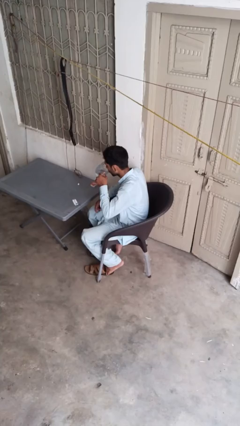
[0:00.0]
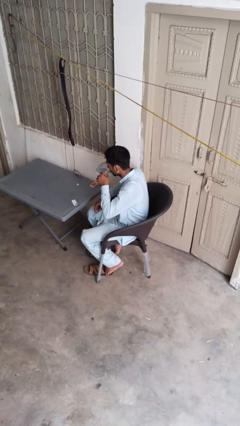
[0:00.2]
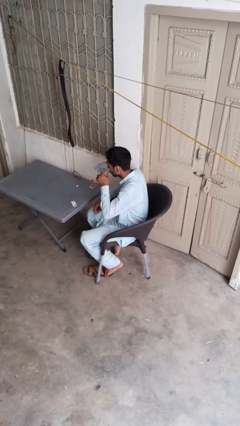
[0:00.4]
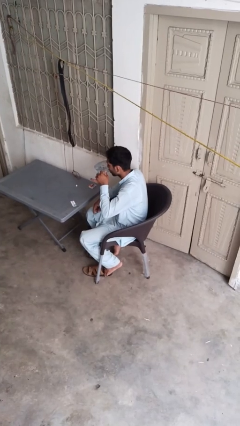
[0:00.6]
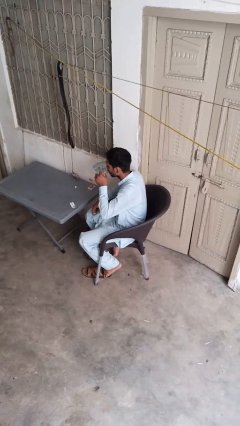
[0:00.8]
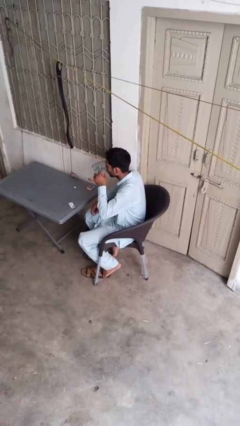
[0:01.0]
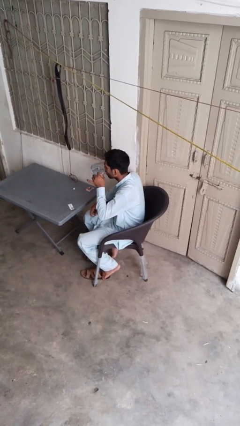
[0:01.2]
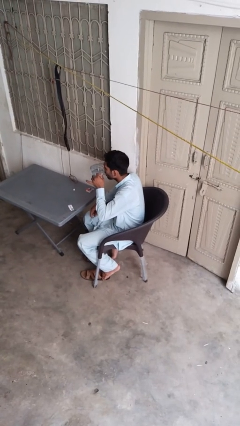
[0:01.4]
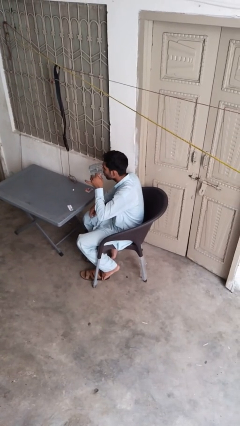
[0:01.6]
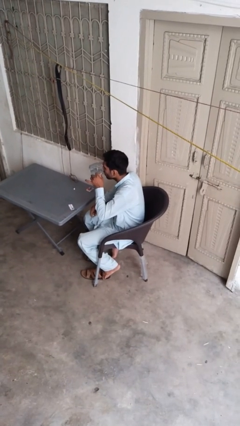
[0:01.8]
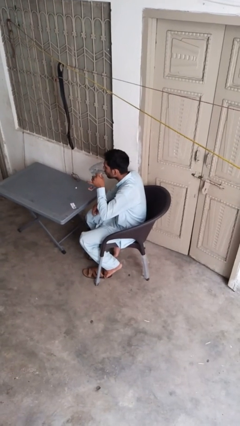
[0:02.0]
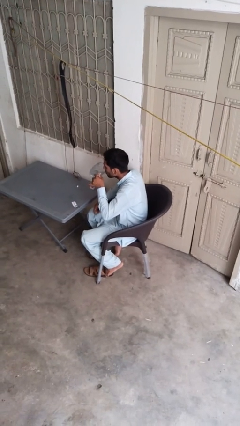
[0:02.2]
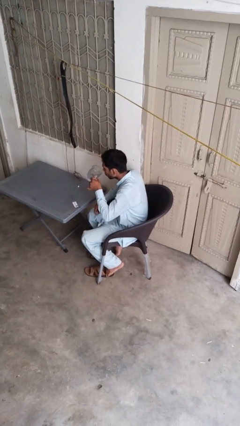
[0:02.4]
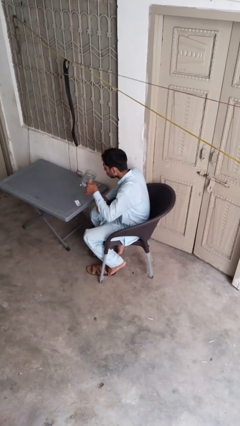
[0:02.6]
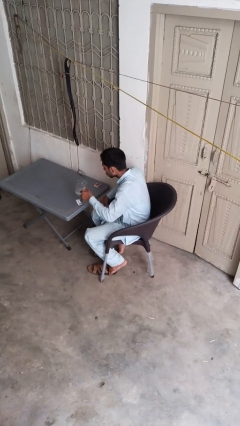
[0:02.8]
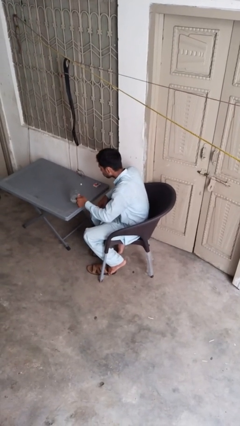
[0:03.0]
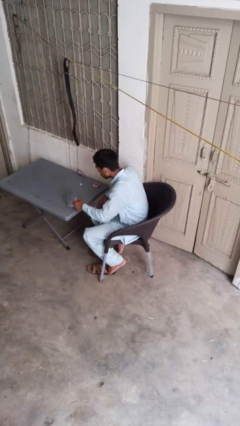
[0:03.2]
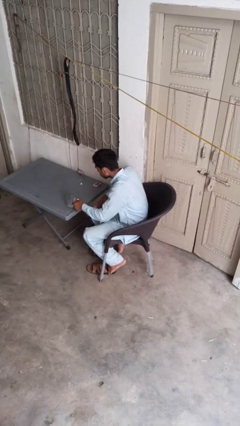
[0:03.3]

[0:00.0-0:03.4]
person drinks from cup

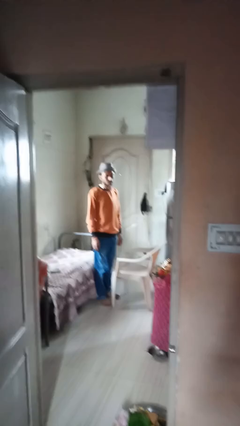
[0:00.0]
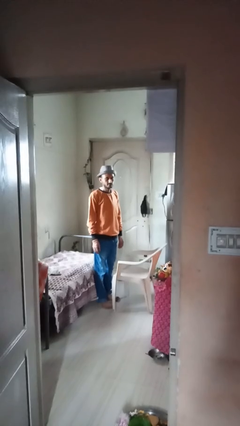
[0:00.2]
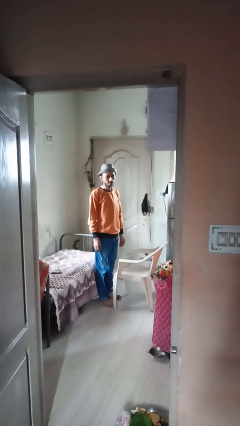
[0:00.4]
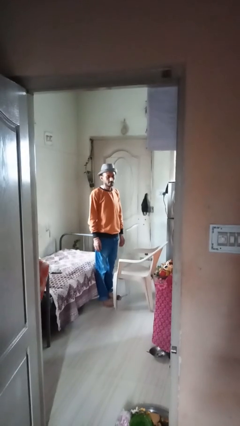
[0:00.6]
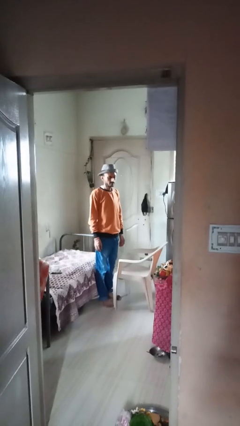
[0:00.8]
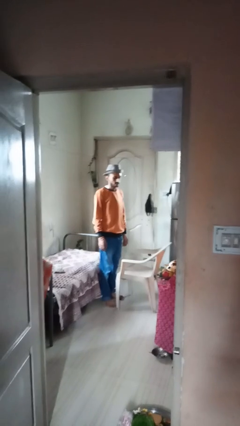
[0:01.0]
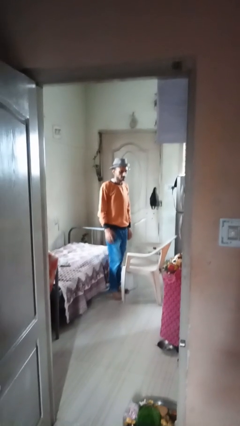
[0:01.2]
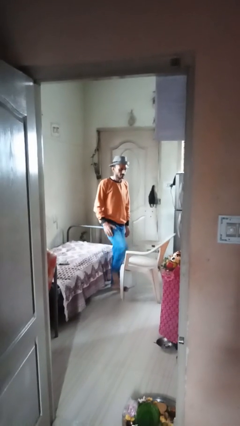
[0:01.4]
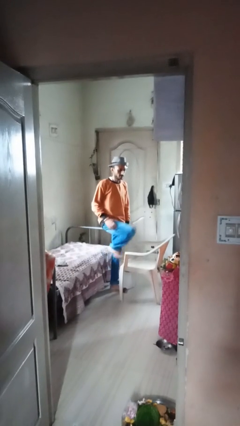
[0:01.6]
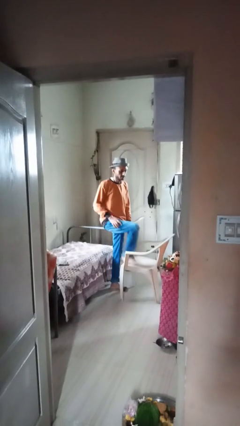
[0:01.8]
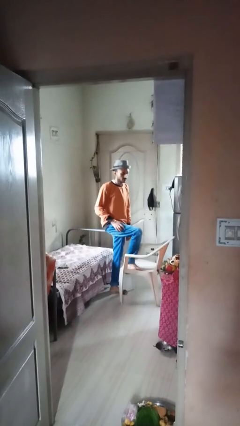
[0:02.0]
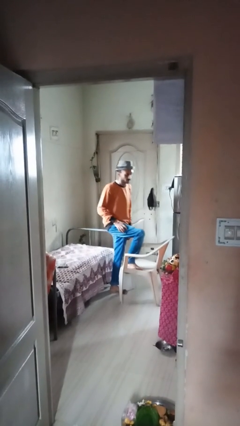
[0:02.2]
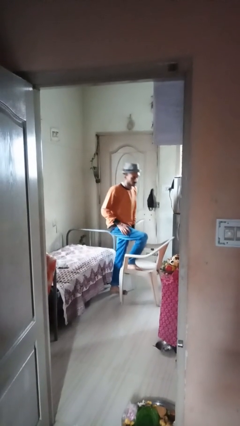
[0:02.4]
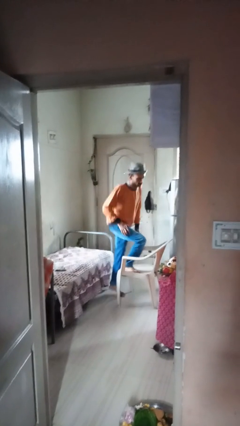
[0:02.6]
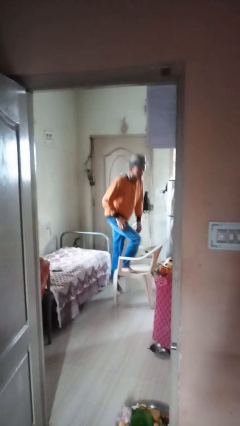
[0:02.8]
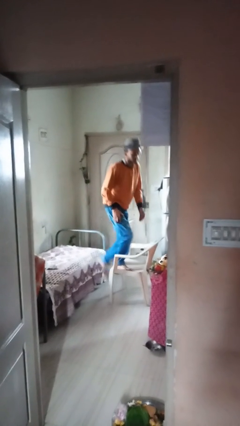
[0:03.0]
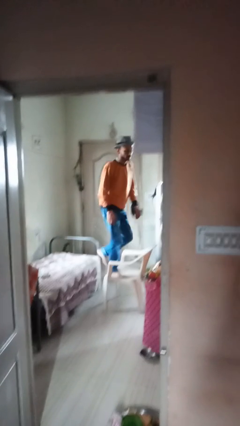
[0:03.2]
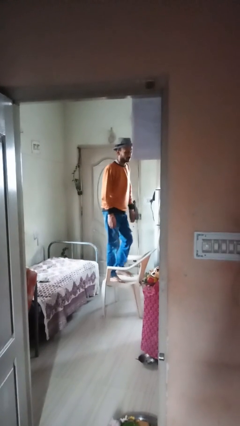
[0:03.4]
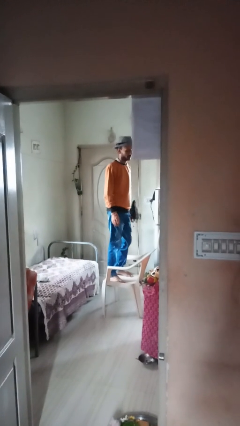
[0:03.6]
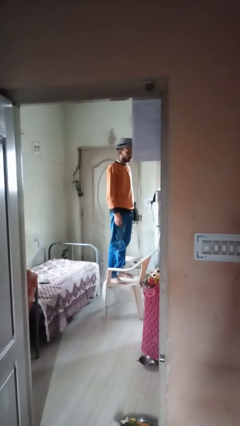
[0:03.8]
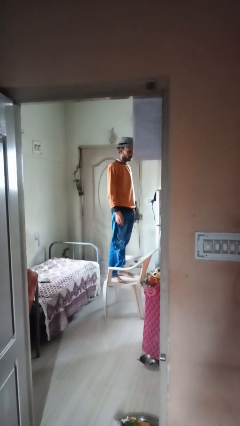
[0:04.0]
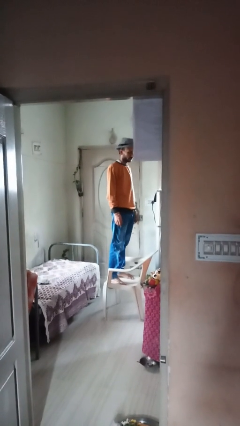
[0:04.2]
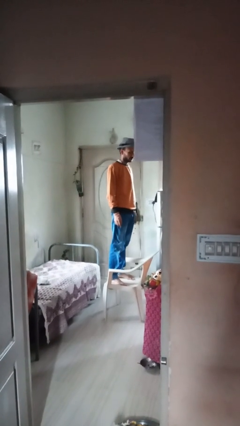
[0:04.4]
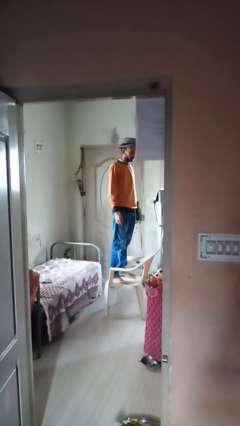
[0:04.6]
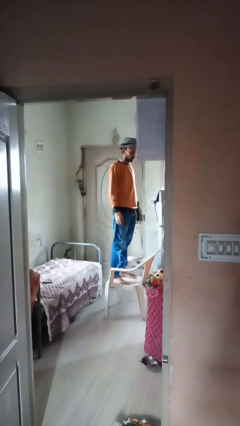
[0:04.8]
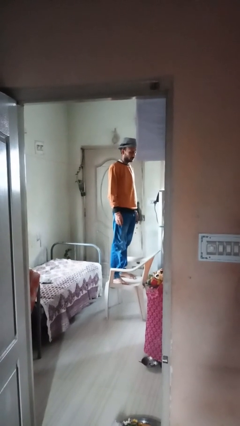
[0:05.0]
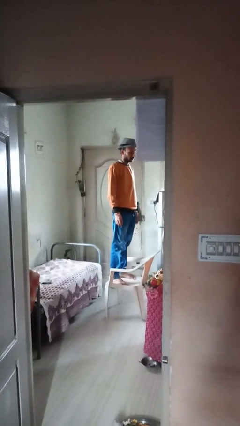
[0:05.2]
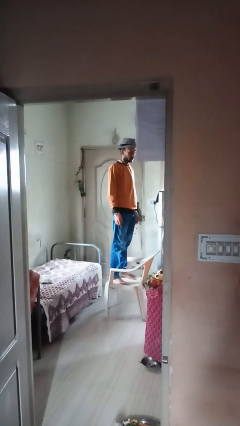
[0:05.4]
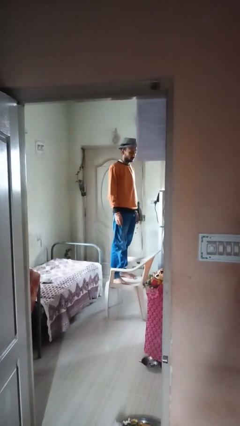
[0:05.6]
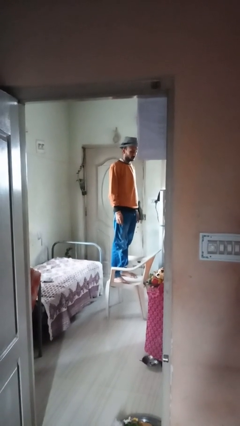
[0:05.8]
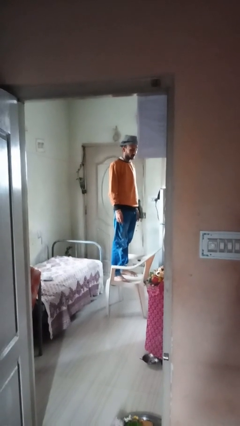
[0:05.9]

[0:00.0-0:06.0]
person climbs on chair

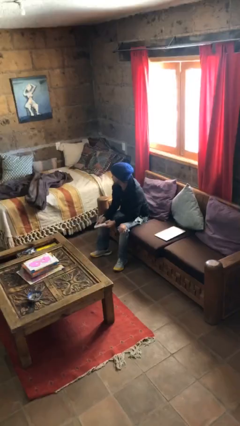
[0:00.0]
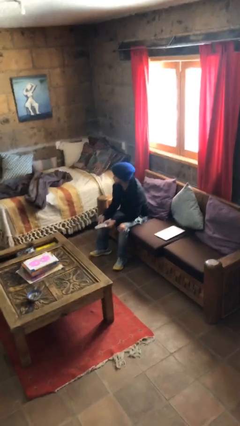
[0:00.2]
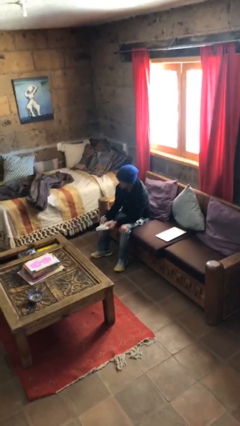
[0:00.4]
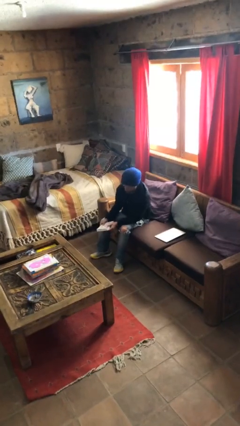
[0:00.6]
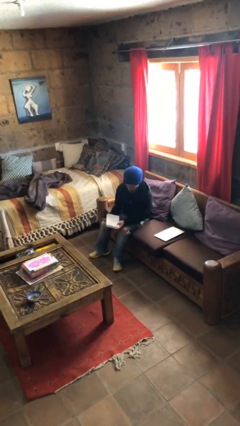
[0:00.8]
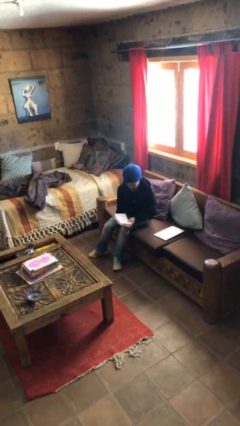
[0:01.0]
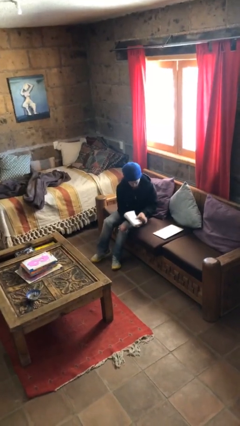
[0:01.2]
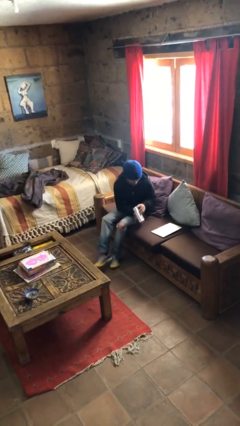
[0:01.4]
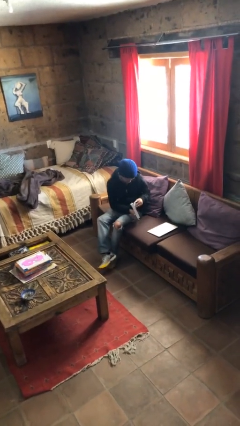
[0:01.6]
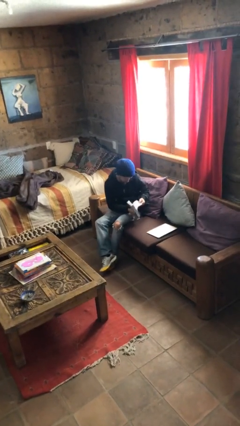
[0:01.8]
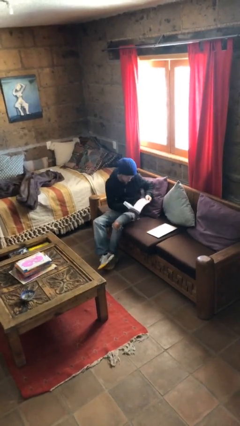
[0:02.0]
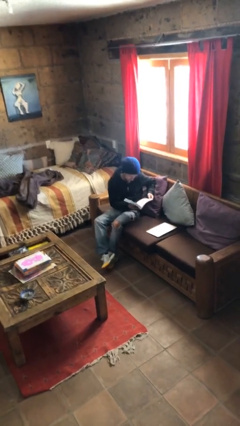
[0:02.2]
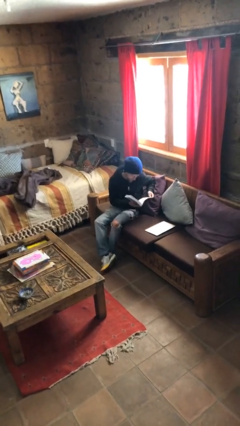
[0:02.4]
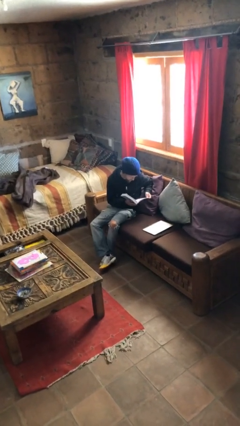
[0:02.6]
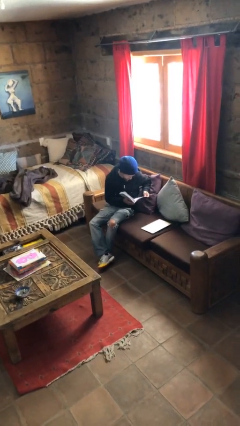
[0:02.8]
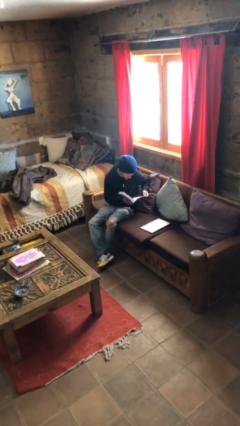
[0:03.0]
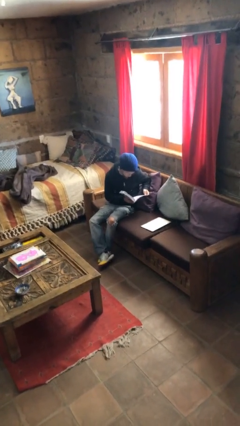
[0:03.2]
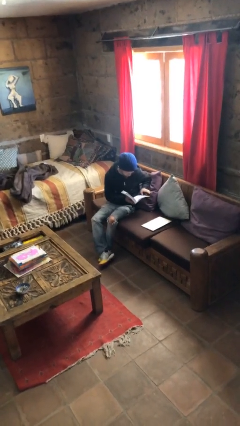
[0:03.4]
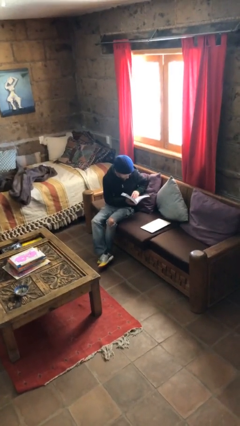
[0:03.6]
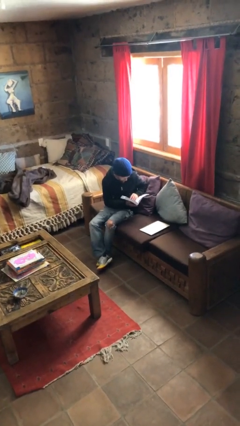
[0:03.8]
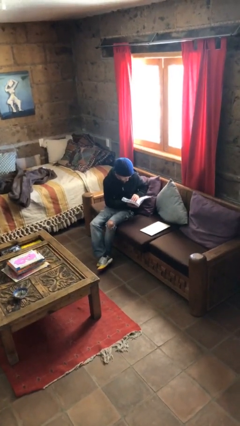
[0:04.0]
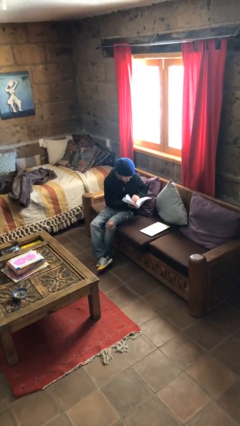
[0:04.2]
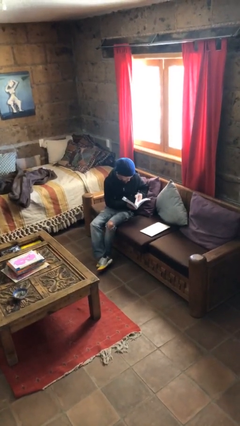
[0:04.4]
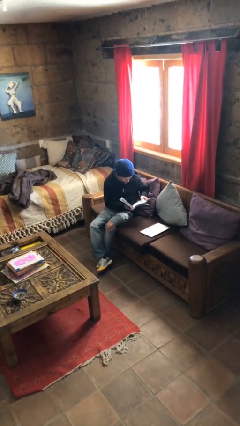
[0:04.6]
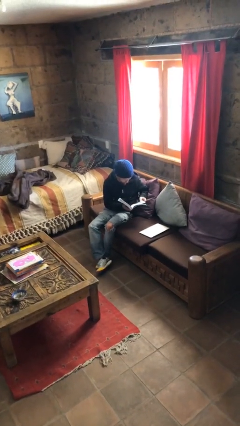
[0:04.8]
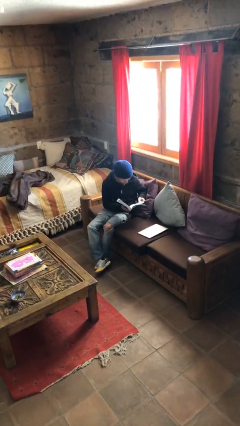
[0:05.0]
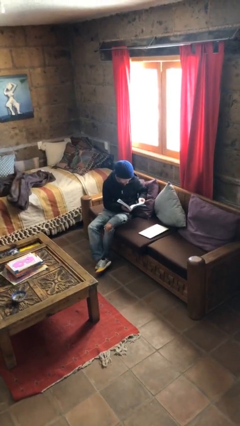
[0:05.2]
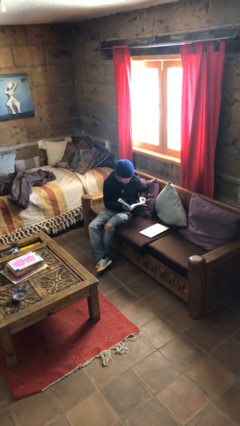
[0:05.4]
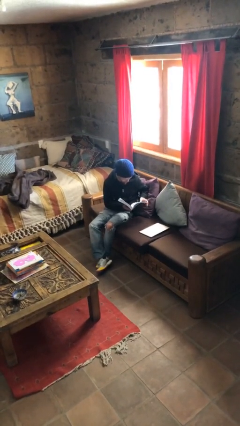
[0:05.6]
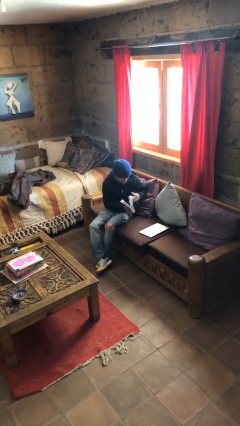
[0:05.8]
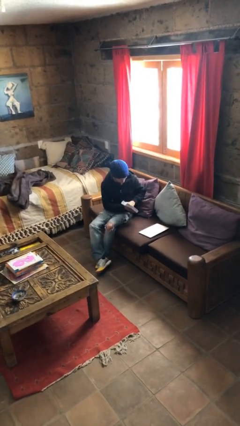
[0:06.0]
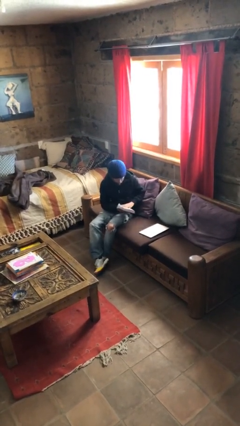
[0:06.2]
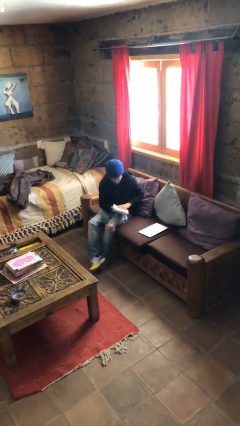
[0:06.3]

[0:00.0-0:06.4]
person reads document

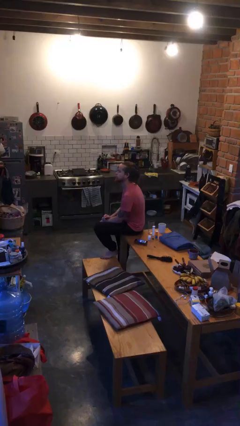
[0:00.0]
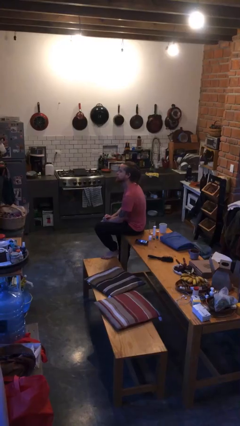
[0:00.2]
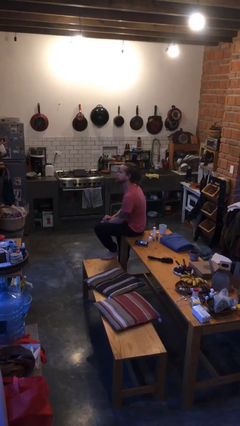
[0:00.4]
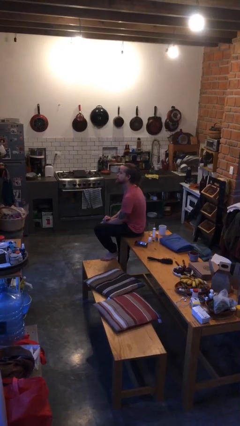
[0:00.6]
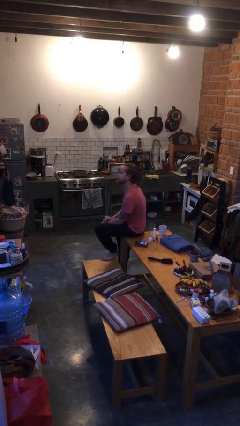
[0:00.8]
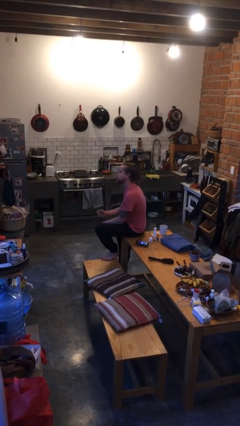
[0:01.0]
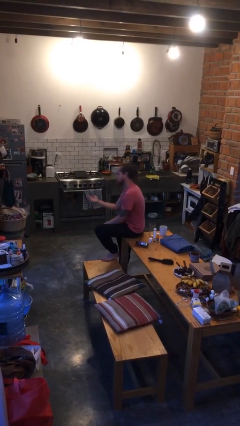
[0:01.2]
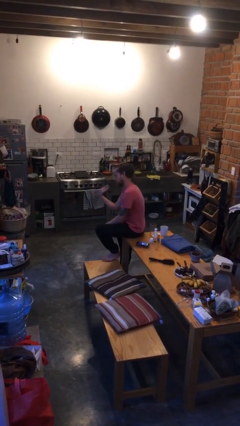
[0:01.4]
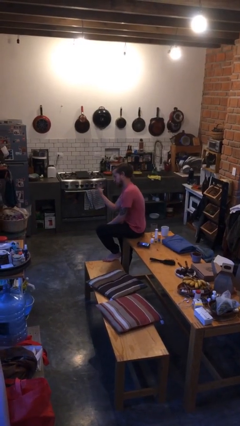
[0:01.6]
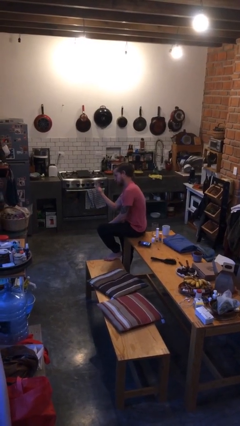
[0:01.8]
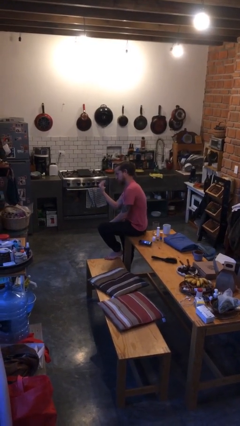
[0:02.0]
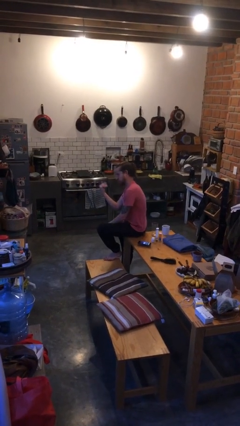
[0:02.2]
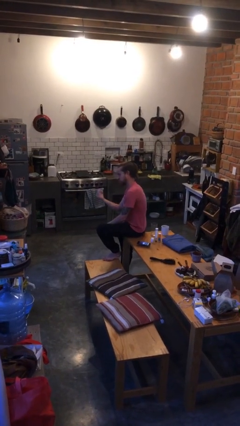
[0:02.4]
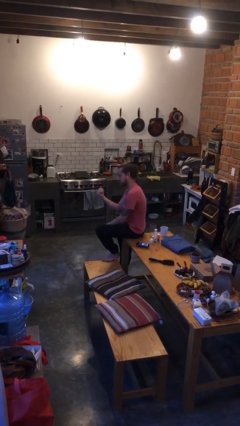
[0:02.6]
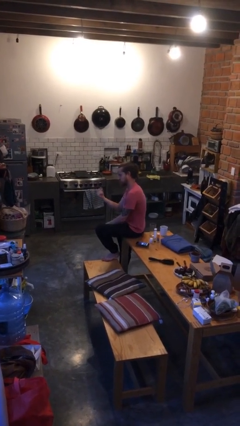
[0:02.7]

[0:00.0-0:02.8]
person gestures come here
